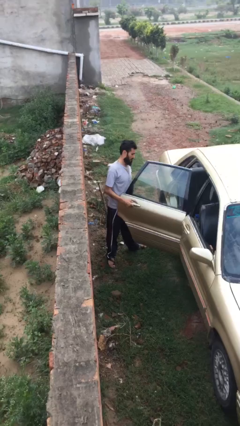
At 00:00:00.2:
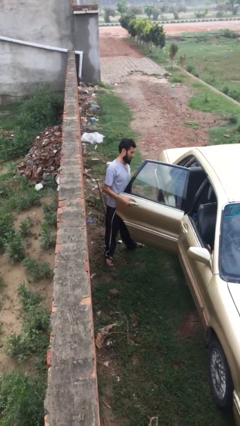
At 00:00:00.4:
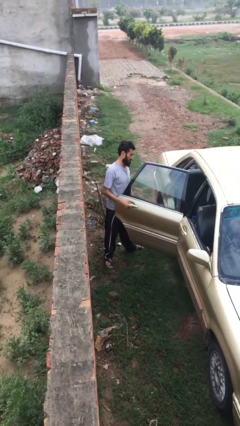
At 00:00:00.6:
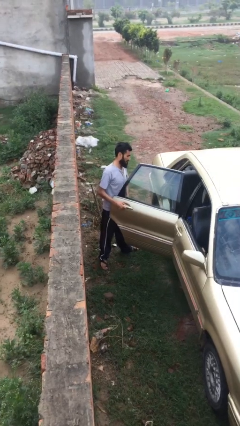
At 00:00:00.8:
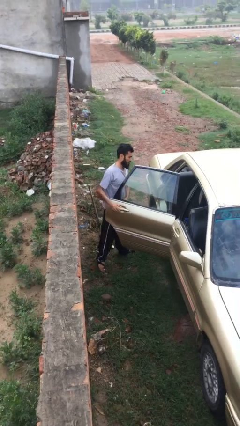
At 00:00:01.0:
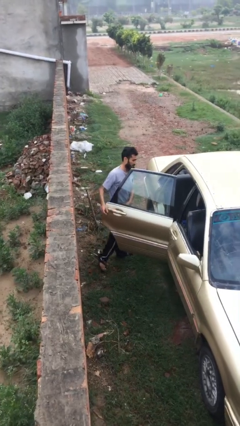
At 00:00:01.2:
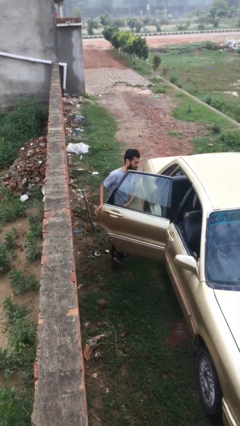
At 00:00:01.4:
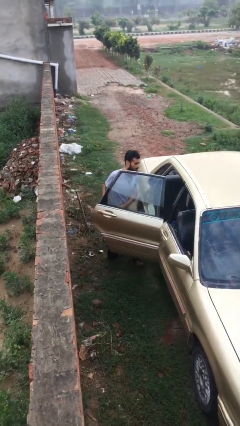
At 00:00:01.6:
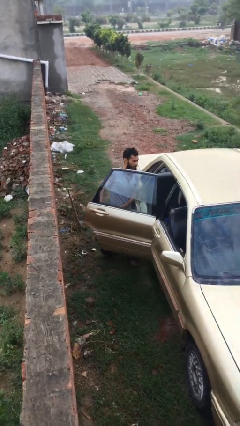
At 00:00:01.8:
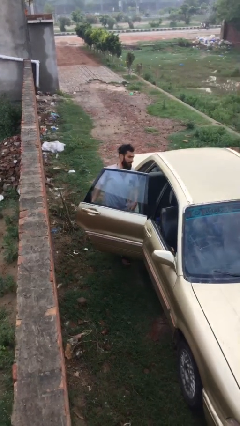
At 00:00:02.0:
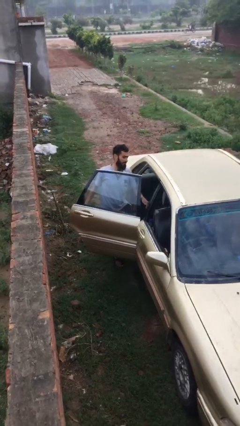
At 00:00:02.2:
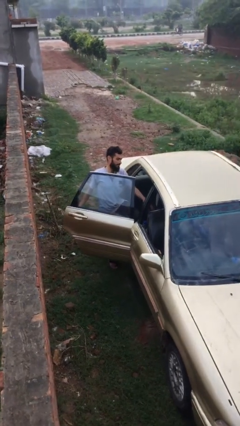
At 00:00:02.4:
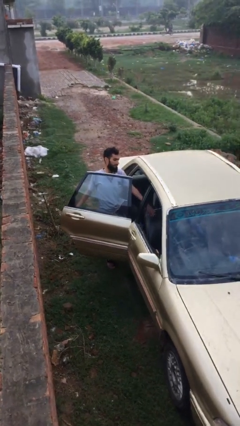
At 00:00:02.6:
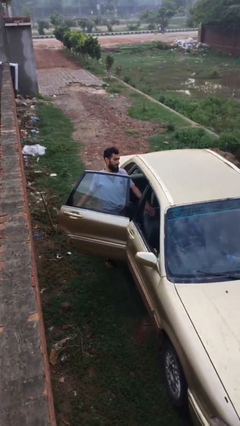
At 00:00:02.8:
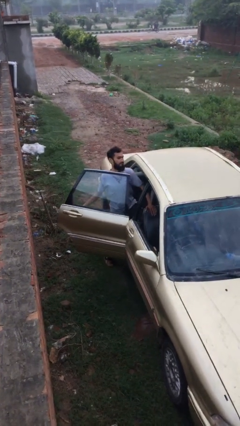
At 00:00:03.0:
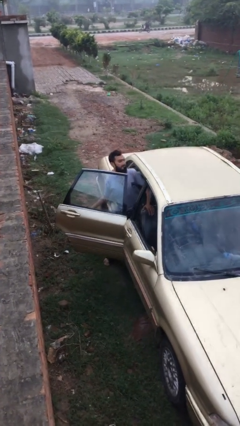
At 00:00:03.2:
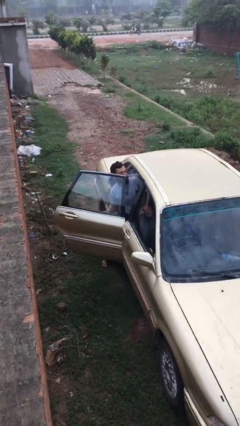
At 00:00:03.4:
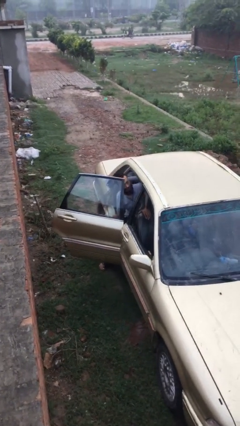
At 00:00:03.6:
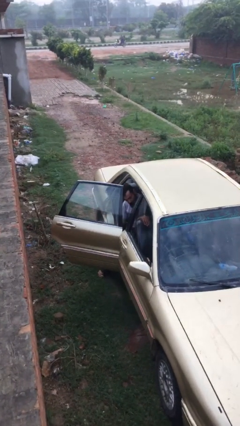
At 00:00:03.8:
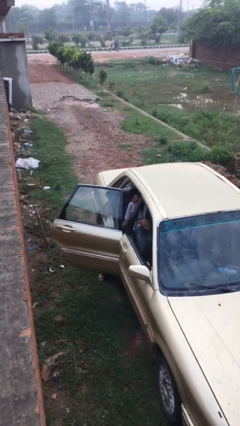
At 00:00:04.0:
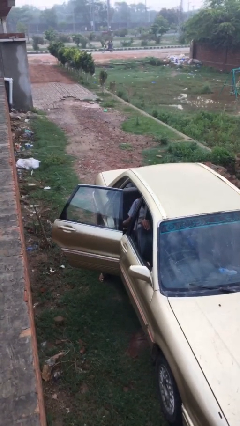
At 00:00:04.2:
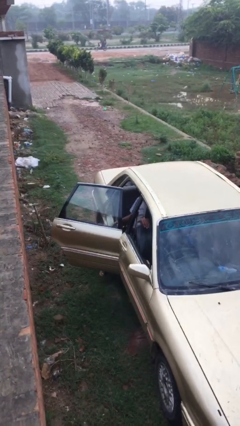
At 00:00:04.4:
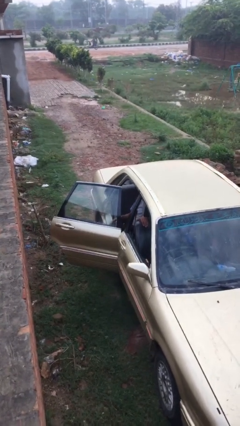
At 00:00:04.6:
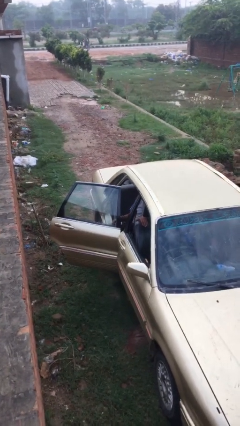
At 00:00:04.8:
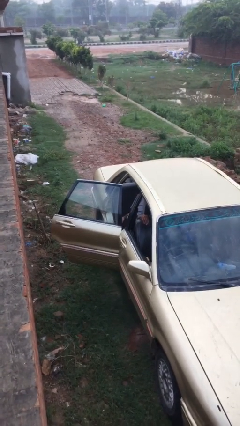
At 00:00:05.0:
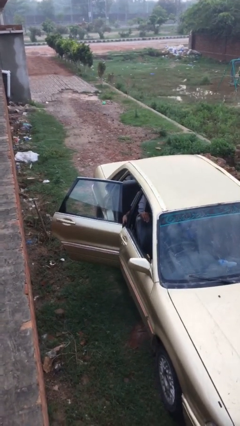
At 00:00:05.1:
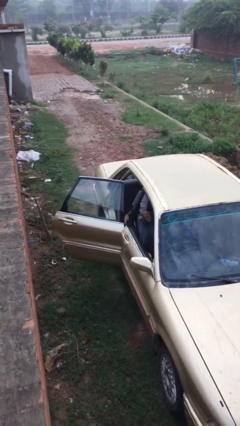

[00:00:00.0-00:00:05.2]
person enters car

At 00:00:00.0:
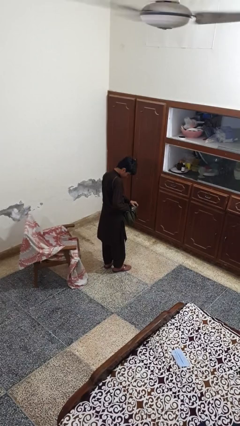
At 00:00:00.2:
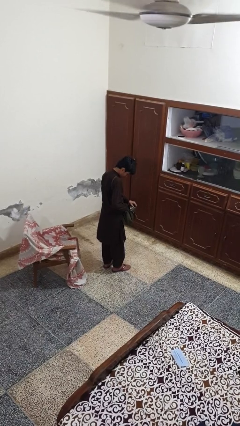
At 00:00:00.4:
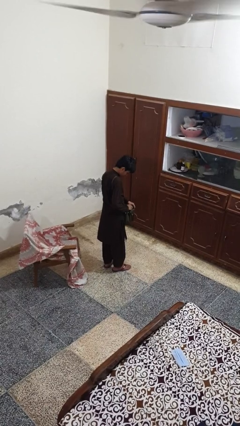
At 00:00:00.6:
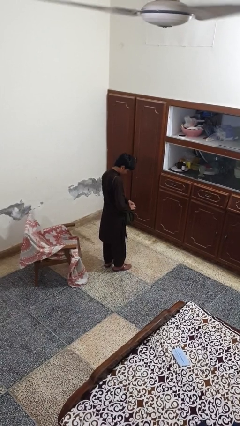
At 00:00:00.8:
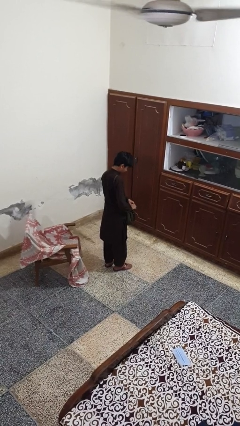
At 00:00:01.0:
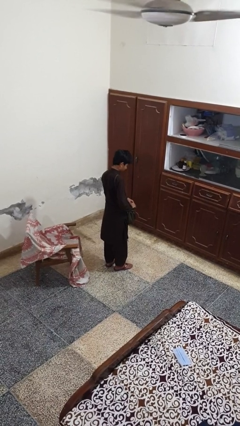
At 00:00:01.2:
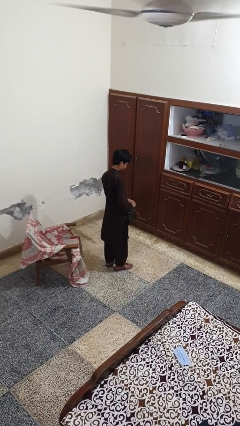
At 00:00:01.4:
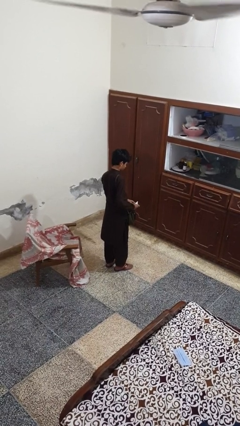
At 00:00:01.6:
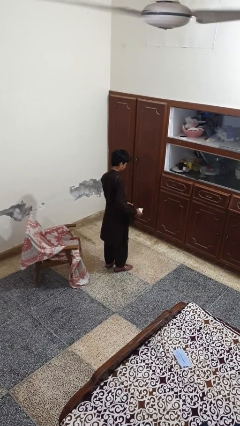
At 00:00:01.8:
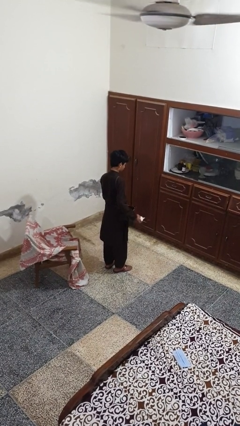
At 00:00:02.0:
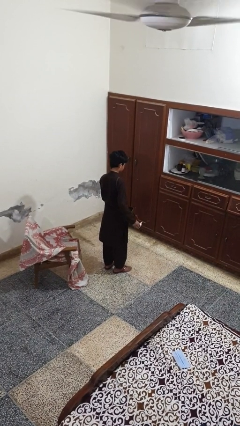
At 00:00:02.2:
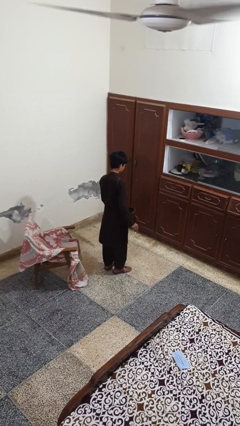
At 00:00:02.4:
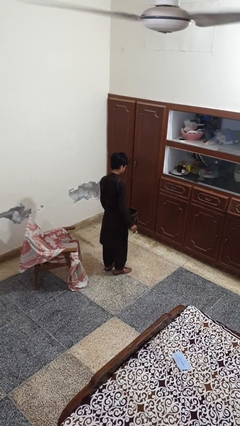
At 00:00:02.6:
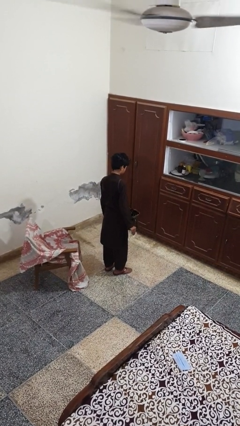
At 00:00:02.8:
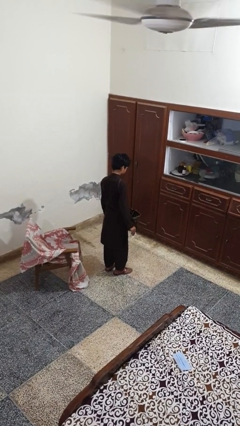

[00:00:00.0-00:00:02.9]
person takes object from purse

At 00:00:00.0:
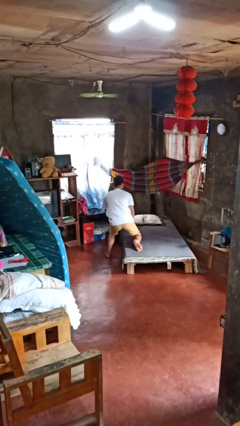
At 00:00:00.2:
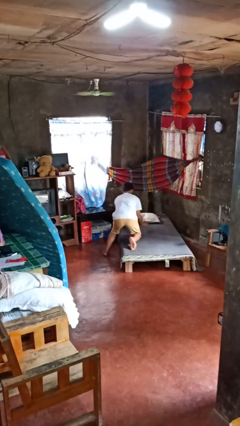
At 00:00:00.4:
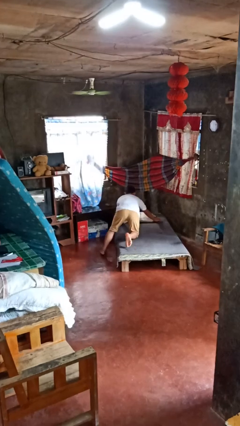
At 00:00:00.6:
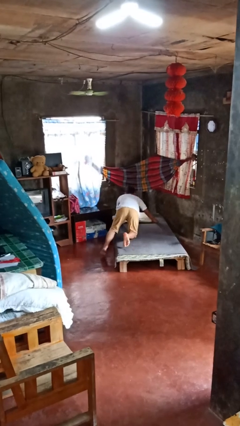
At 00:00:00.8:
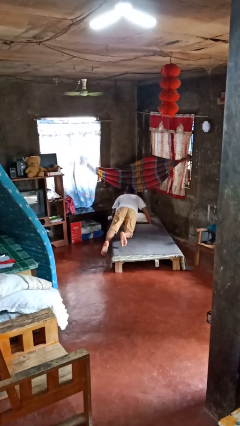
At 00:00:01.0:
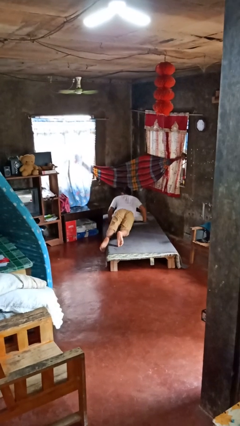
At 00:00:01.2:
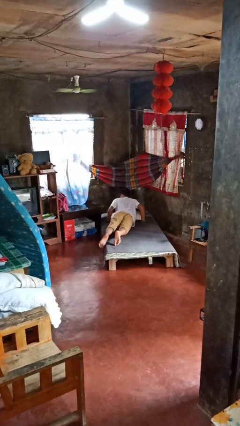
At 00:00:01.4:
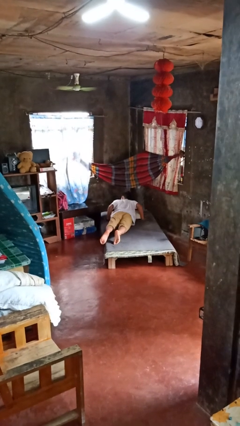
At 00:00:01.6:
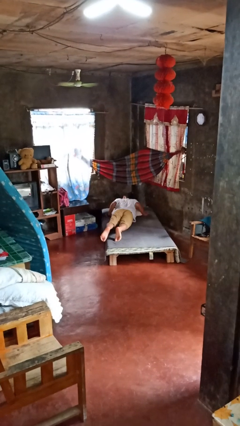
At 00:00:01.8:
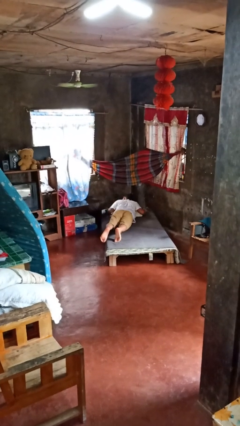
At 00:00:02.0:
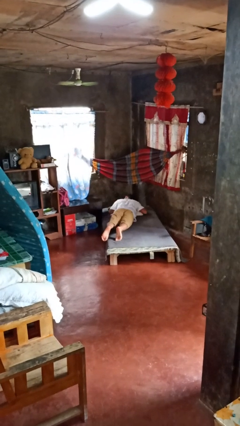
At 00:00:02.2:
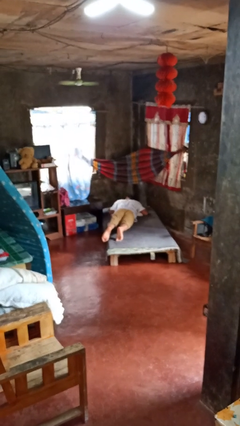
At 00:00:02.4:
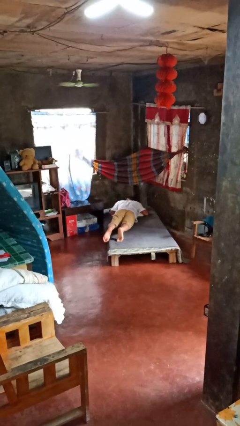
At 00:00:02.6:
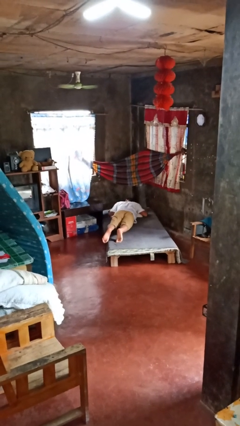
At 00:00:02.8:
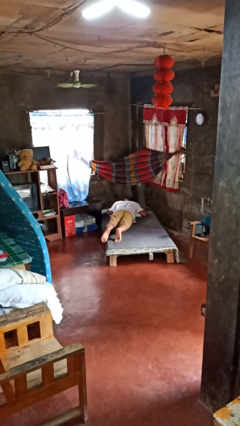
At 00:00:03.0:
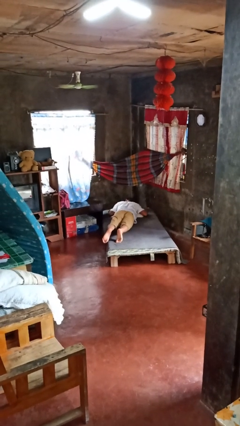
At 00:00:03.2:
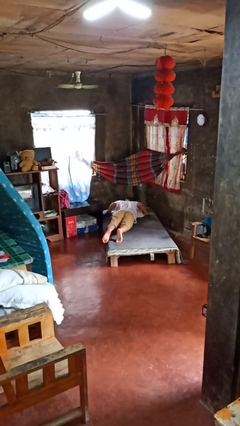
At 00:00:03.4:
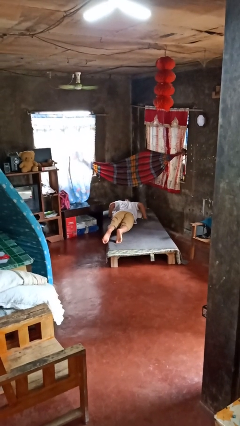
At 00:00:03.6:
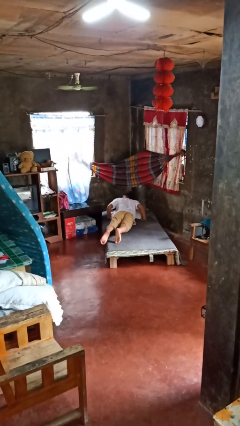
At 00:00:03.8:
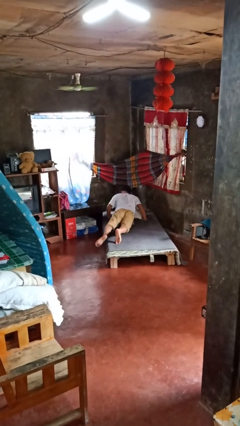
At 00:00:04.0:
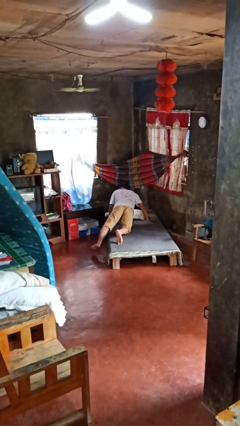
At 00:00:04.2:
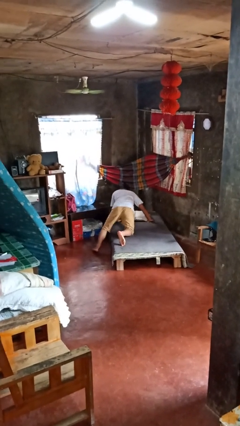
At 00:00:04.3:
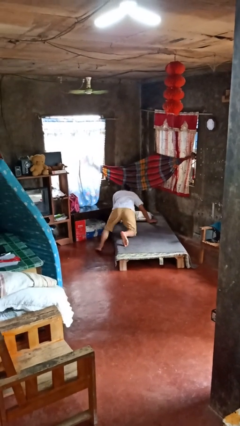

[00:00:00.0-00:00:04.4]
person lies down on bed

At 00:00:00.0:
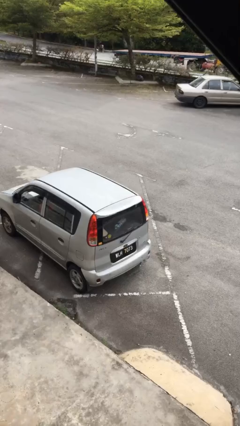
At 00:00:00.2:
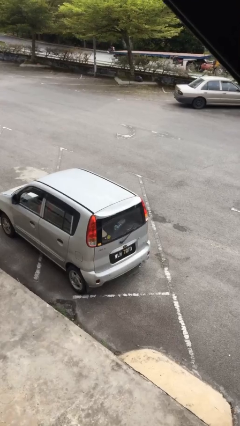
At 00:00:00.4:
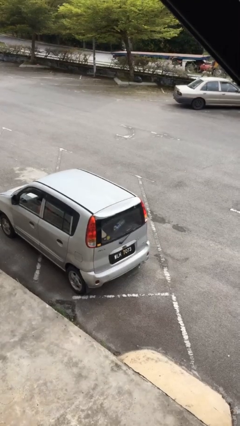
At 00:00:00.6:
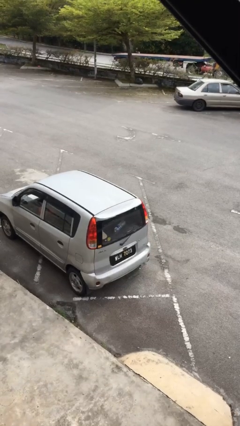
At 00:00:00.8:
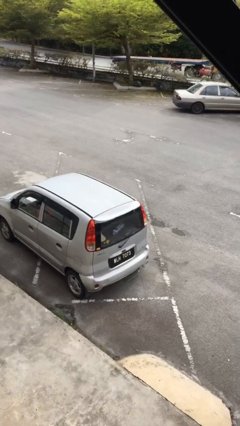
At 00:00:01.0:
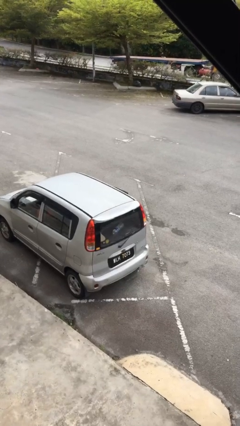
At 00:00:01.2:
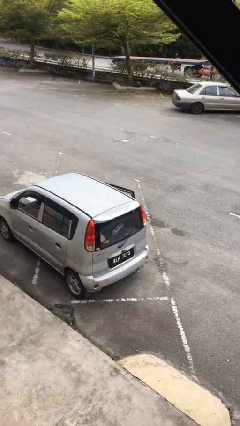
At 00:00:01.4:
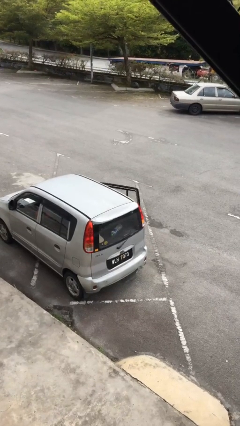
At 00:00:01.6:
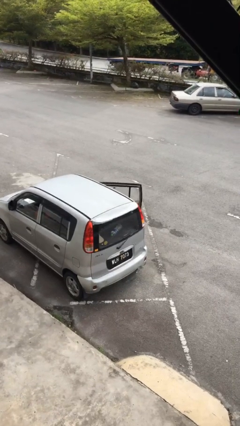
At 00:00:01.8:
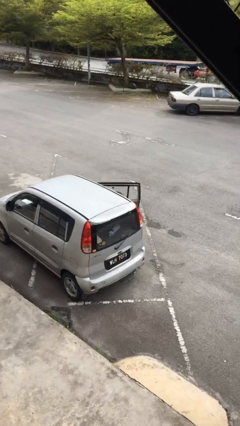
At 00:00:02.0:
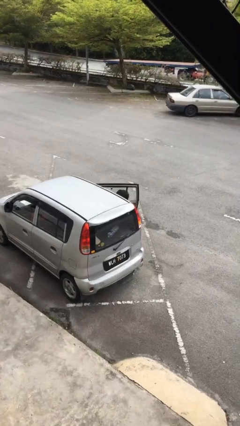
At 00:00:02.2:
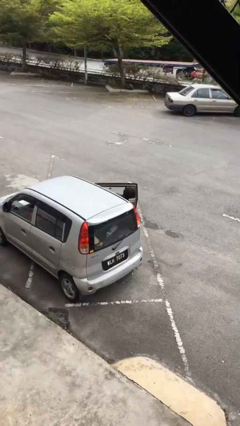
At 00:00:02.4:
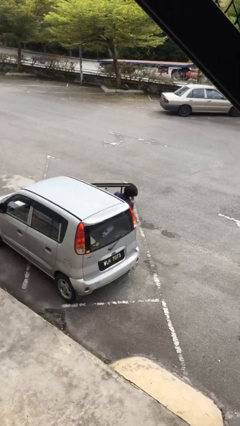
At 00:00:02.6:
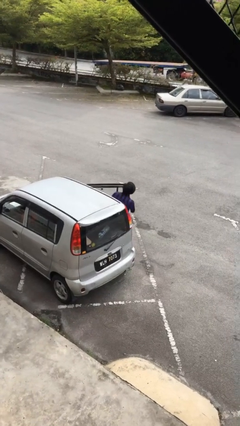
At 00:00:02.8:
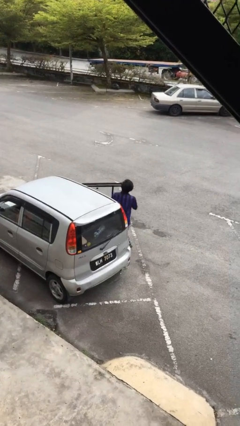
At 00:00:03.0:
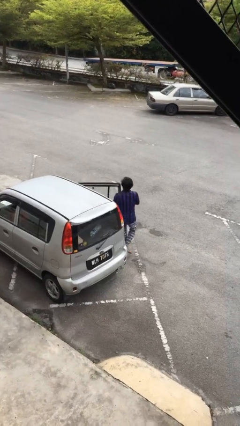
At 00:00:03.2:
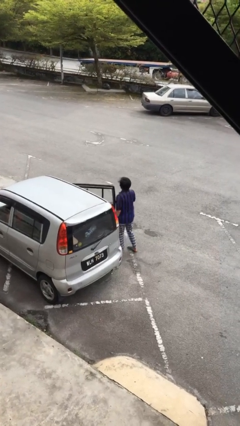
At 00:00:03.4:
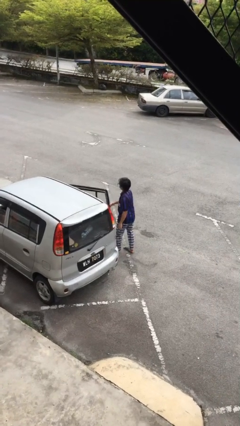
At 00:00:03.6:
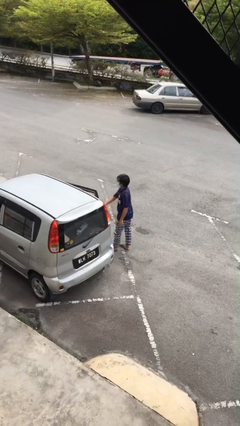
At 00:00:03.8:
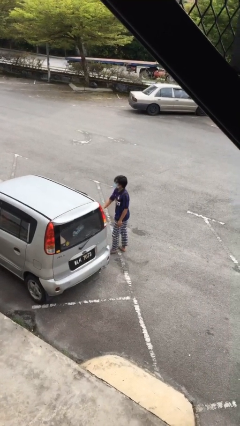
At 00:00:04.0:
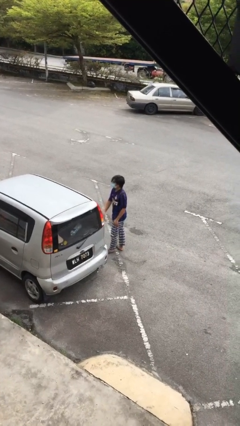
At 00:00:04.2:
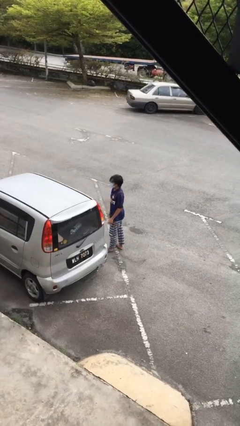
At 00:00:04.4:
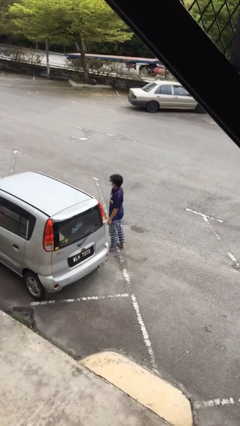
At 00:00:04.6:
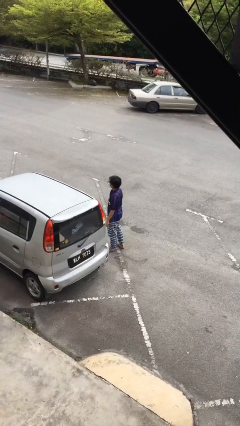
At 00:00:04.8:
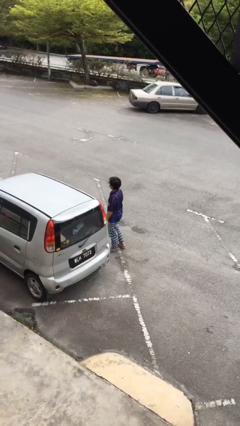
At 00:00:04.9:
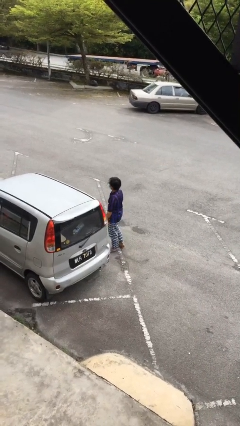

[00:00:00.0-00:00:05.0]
person exits car
